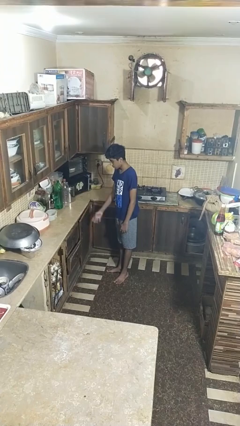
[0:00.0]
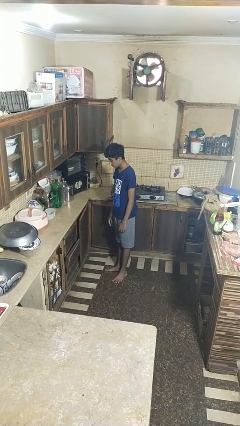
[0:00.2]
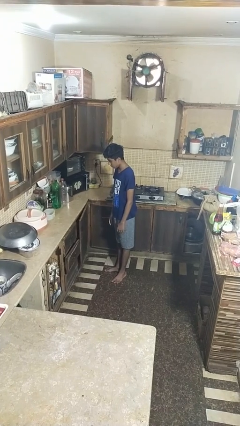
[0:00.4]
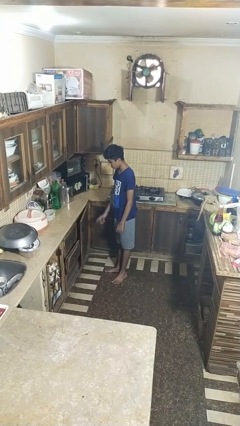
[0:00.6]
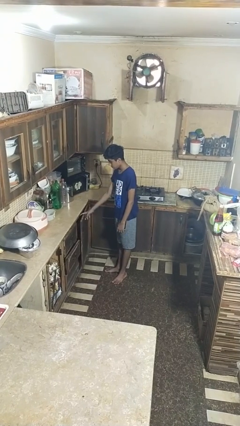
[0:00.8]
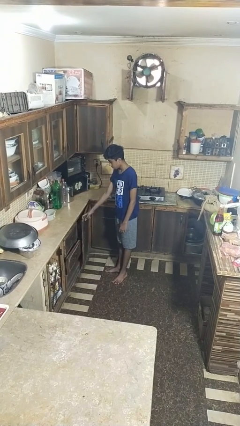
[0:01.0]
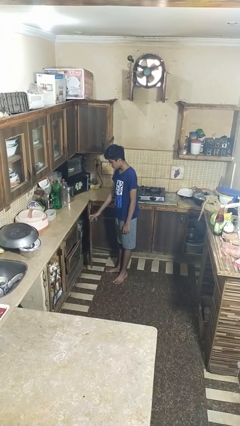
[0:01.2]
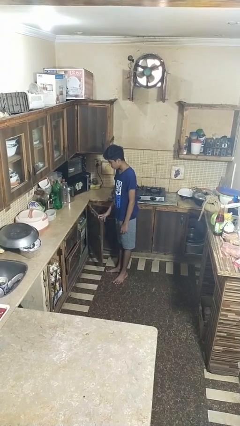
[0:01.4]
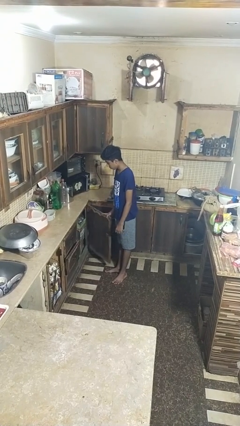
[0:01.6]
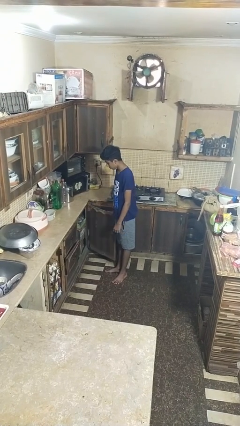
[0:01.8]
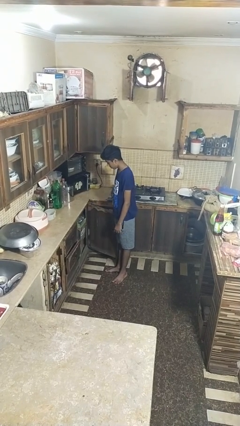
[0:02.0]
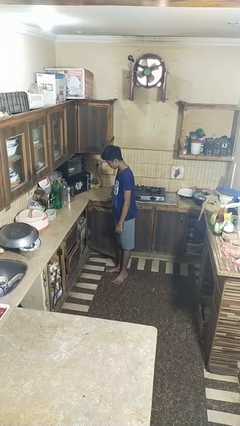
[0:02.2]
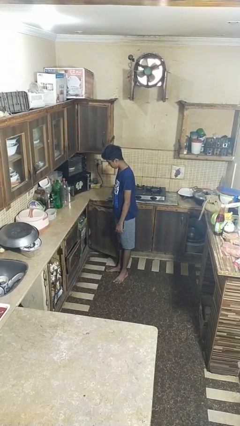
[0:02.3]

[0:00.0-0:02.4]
person opens closet door

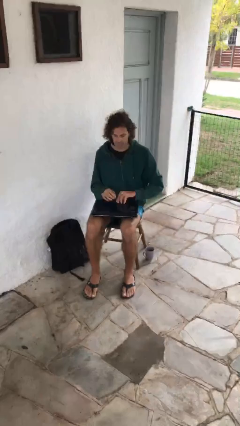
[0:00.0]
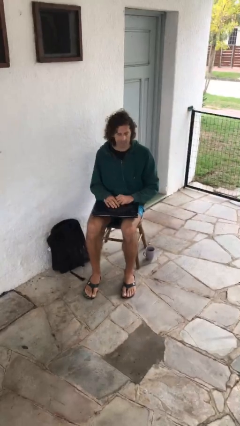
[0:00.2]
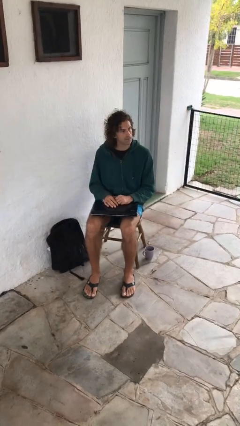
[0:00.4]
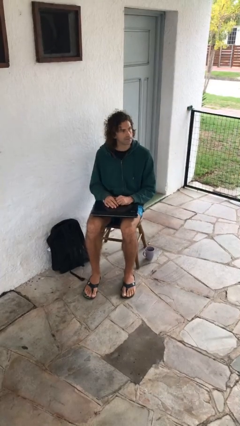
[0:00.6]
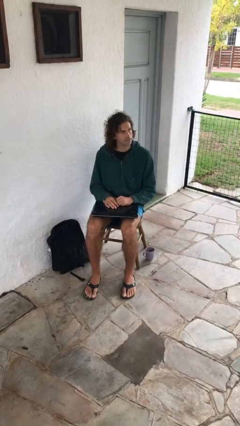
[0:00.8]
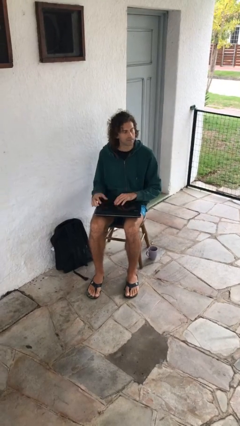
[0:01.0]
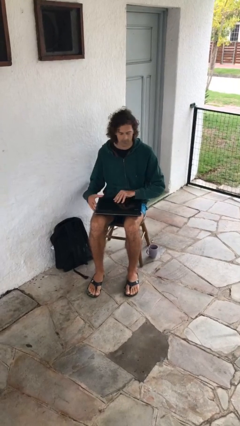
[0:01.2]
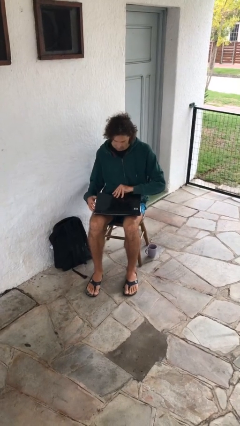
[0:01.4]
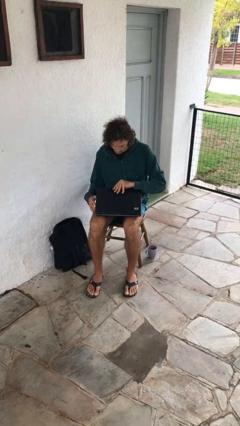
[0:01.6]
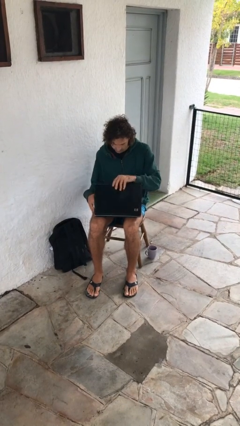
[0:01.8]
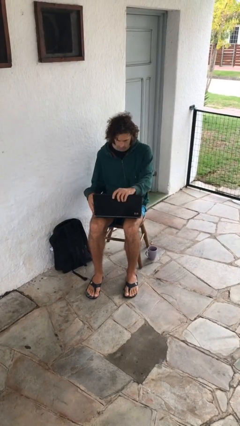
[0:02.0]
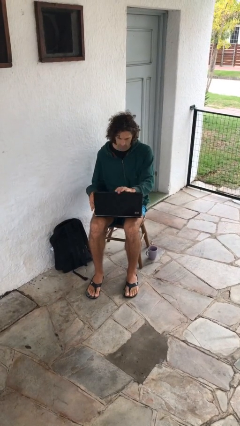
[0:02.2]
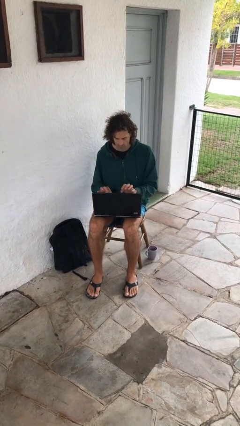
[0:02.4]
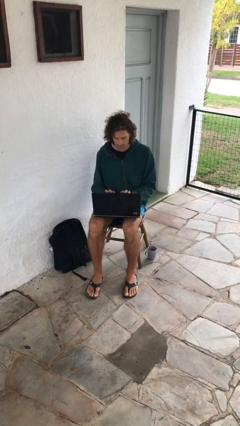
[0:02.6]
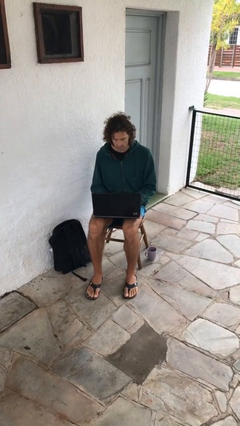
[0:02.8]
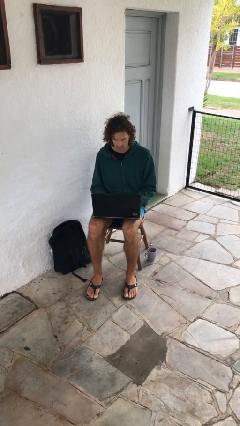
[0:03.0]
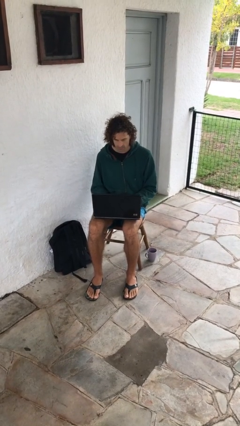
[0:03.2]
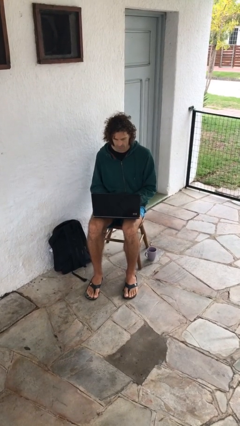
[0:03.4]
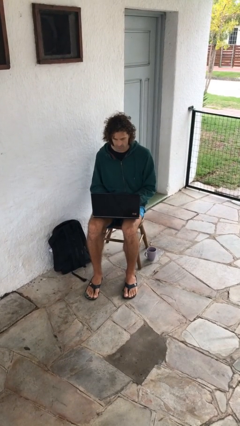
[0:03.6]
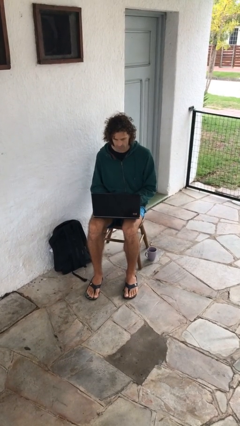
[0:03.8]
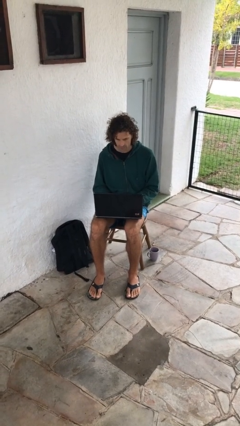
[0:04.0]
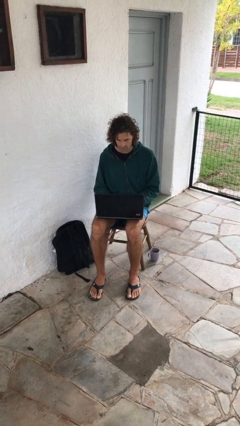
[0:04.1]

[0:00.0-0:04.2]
person interacts with laptop

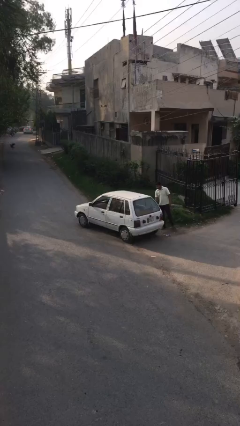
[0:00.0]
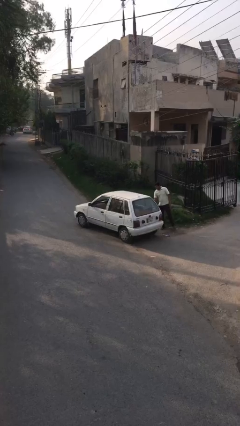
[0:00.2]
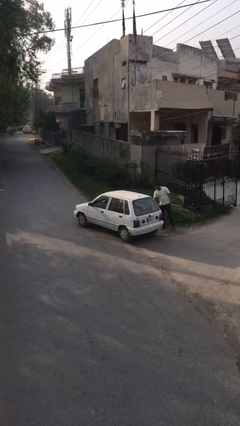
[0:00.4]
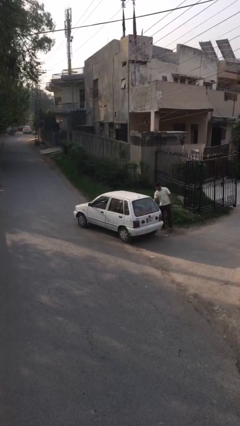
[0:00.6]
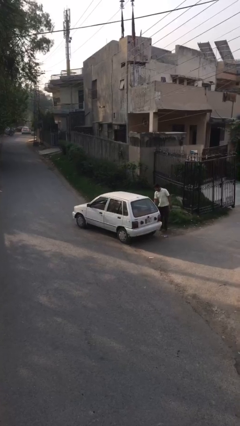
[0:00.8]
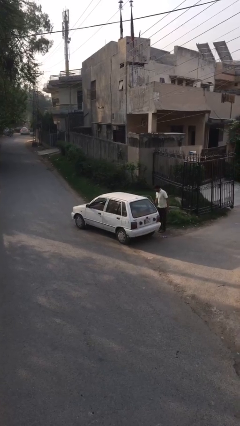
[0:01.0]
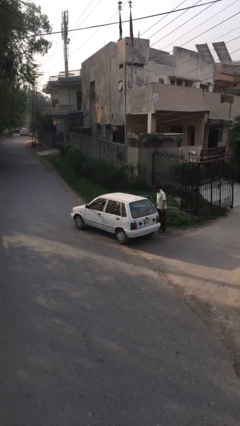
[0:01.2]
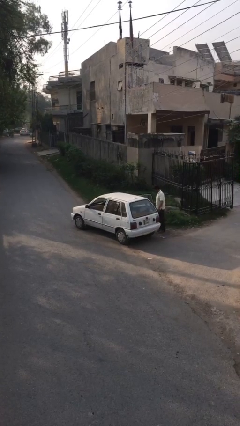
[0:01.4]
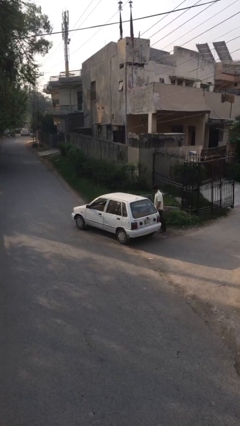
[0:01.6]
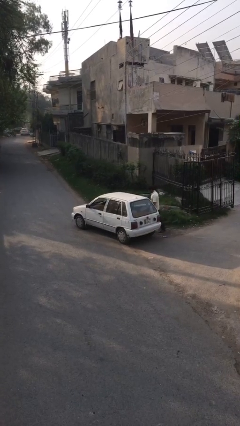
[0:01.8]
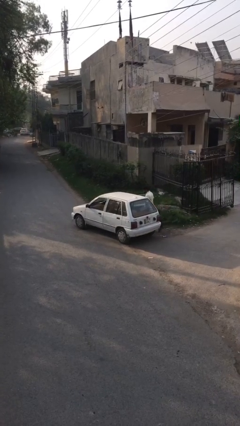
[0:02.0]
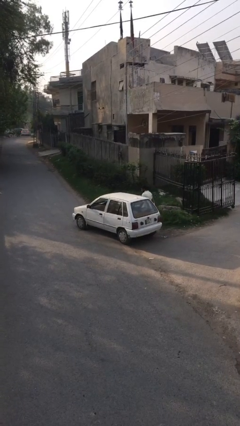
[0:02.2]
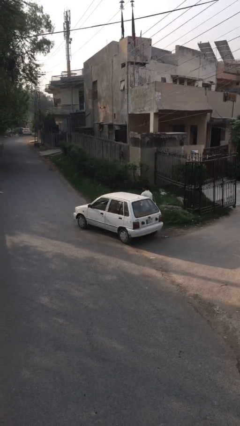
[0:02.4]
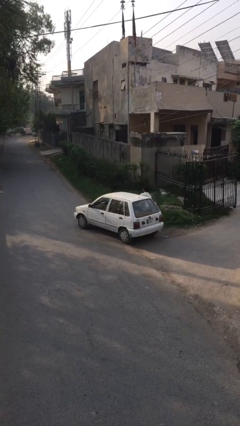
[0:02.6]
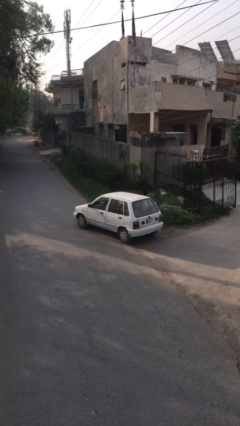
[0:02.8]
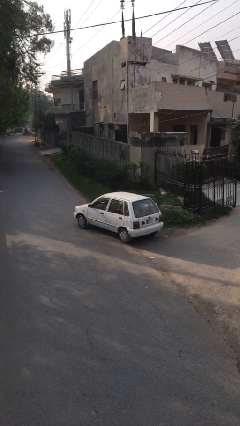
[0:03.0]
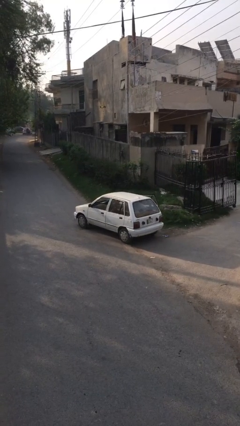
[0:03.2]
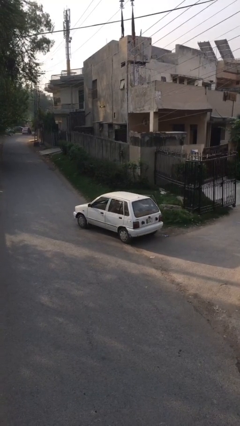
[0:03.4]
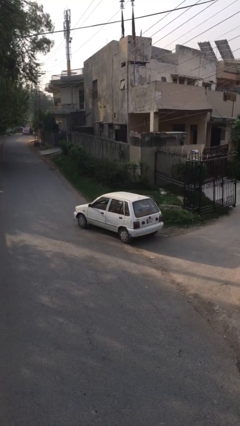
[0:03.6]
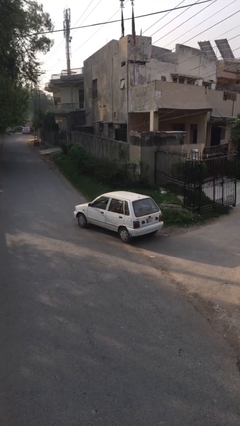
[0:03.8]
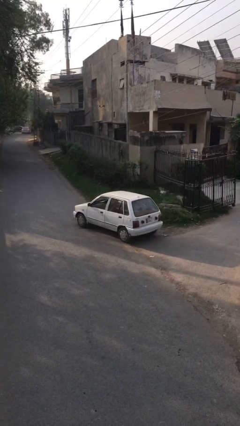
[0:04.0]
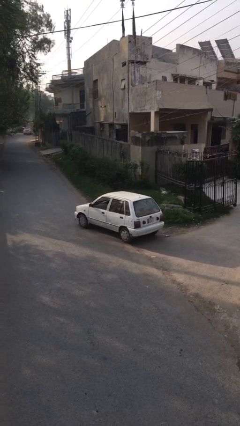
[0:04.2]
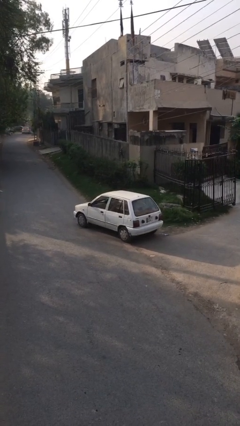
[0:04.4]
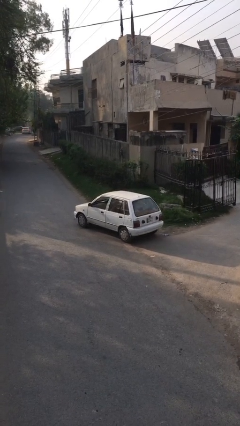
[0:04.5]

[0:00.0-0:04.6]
car picks up person

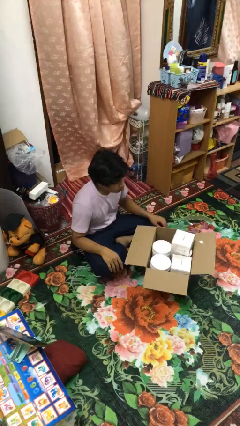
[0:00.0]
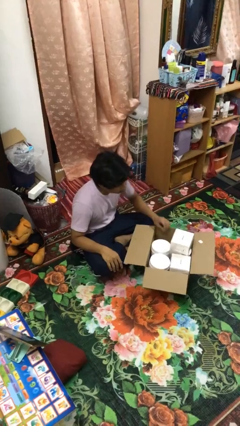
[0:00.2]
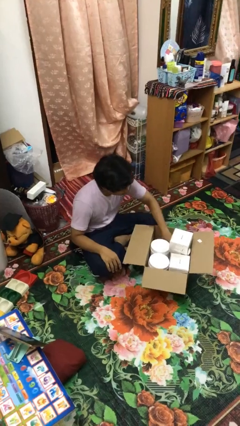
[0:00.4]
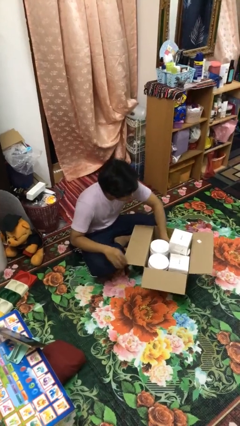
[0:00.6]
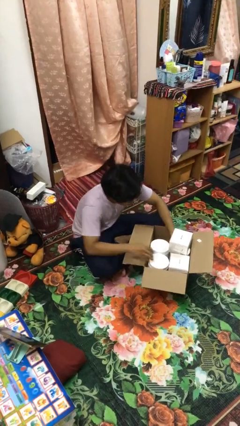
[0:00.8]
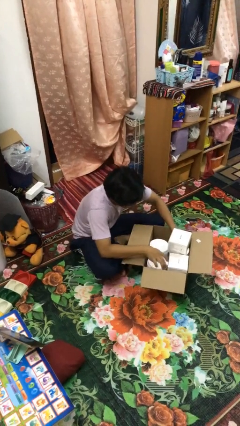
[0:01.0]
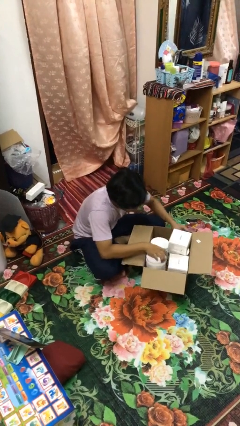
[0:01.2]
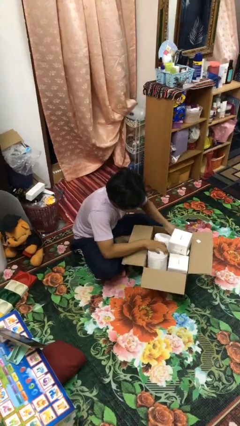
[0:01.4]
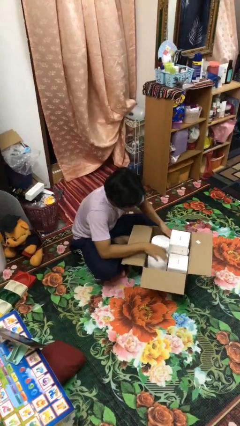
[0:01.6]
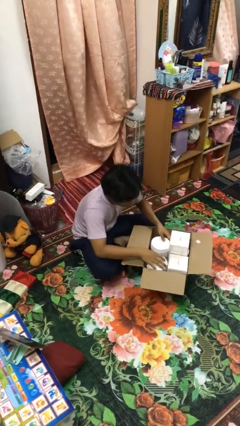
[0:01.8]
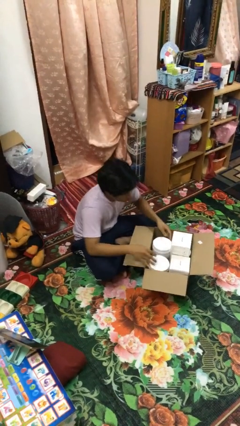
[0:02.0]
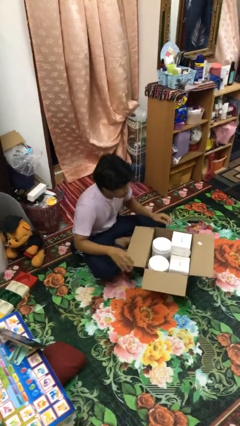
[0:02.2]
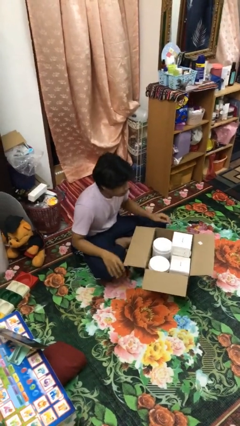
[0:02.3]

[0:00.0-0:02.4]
person searches in box

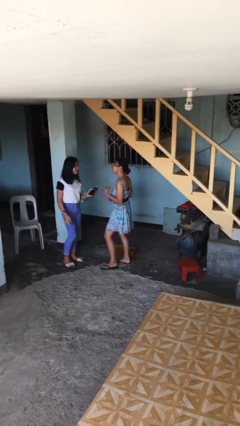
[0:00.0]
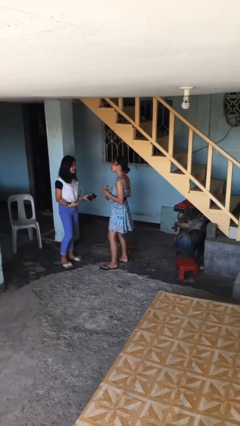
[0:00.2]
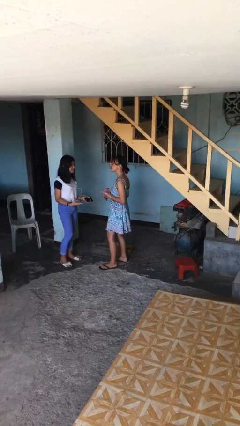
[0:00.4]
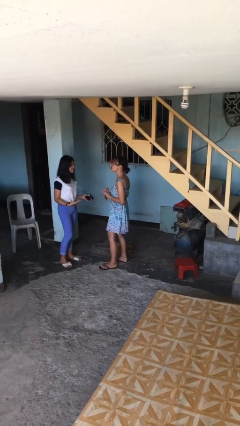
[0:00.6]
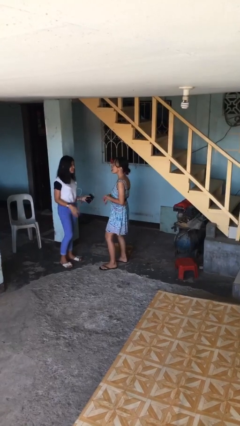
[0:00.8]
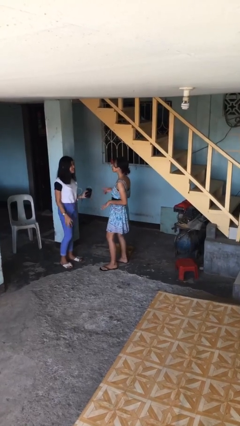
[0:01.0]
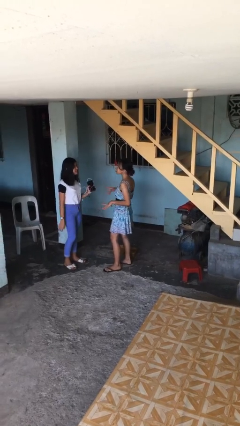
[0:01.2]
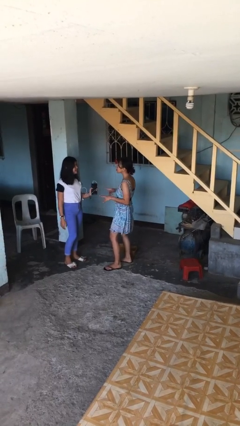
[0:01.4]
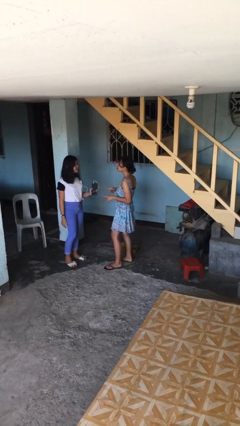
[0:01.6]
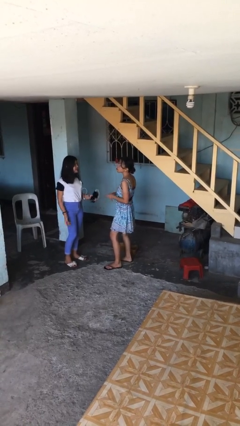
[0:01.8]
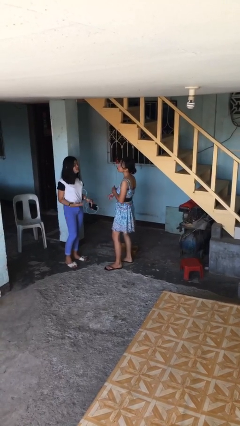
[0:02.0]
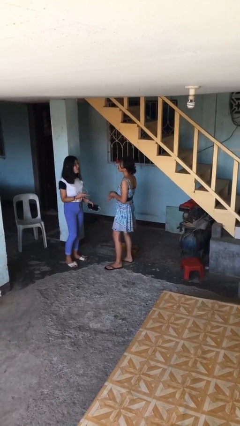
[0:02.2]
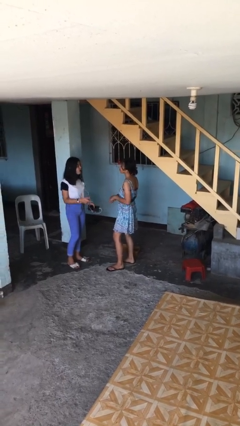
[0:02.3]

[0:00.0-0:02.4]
person talks to person

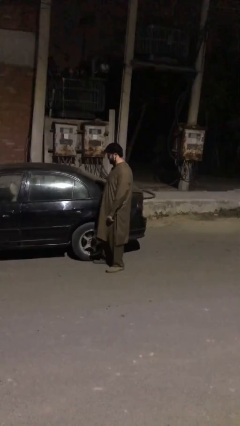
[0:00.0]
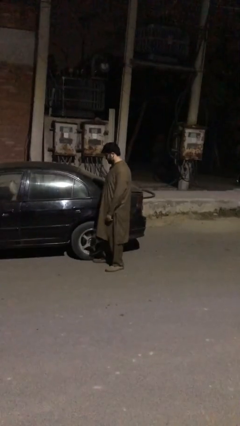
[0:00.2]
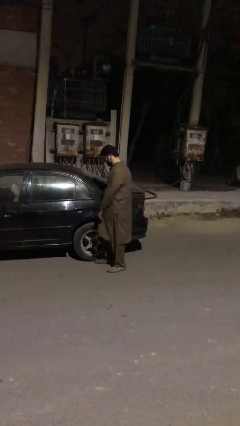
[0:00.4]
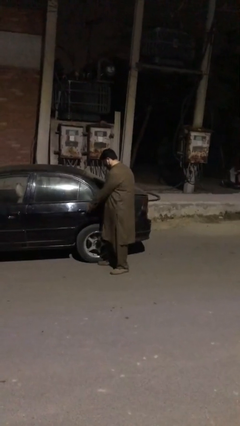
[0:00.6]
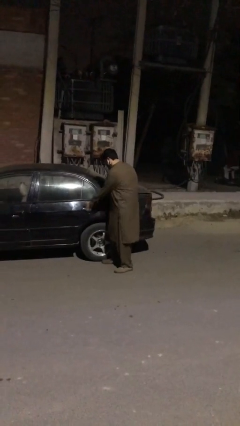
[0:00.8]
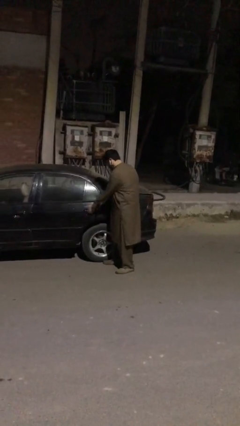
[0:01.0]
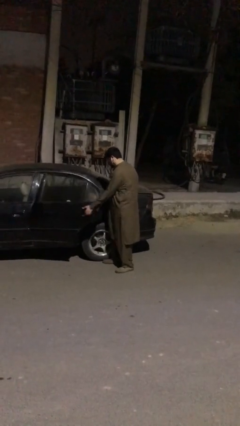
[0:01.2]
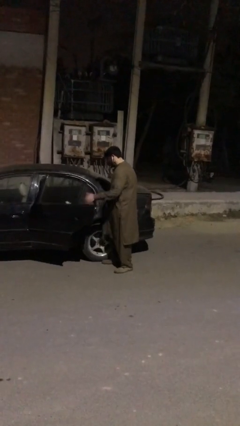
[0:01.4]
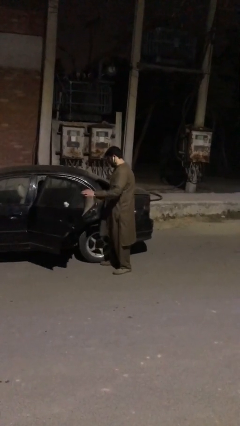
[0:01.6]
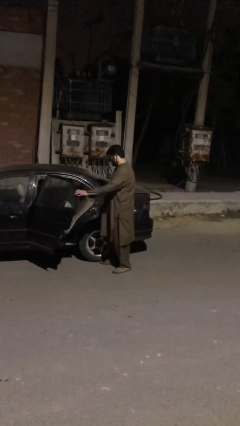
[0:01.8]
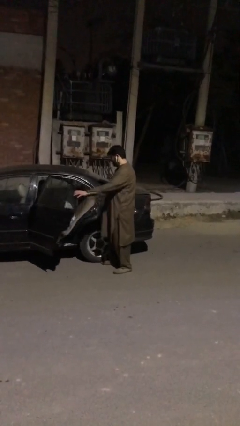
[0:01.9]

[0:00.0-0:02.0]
person opens car door
